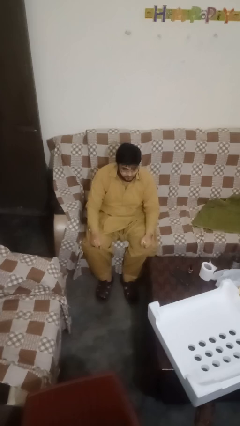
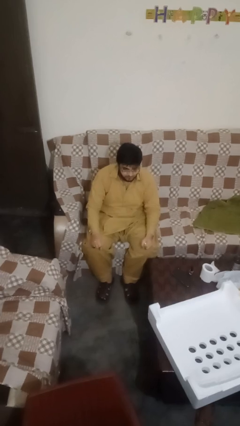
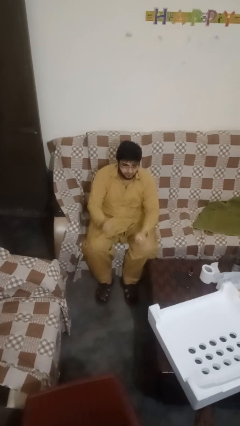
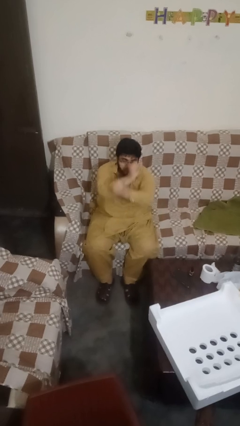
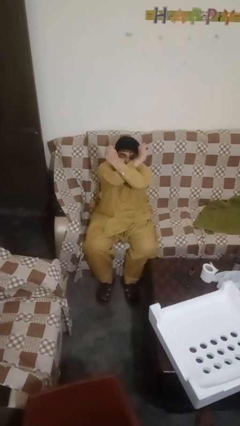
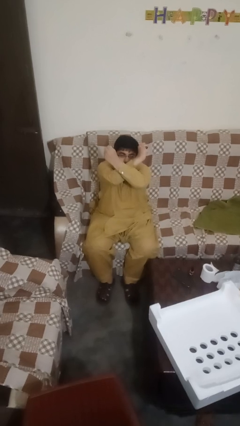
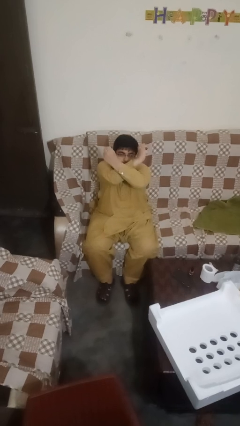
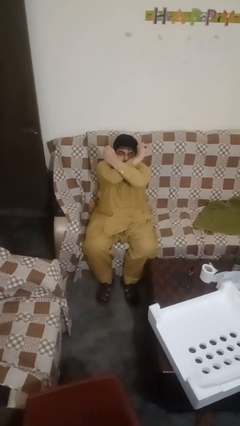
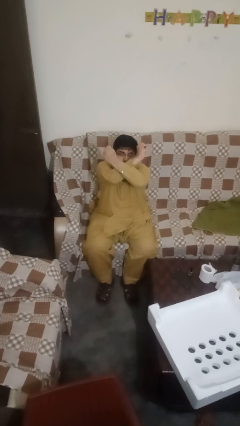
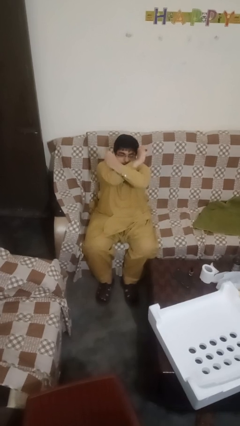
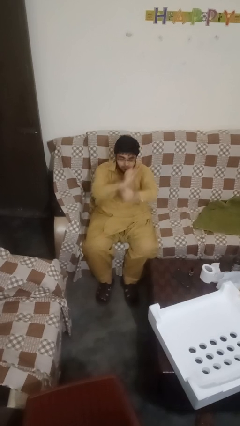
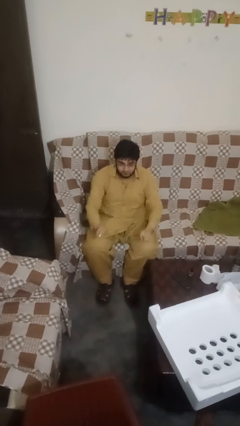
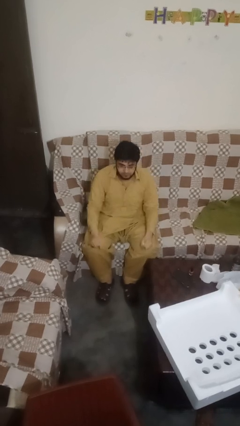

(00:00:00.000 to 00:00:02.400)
person gestures arms x

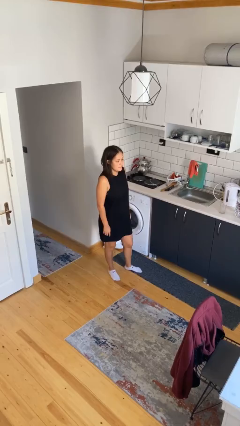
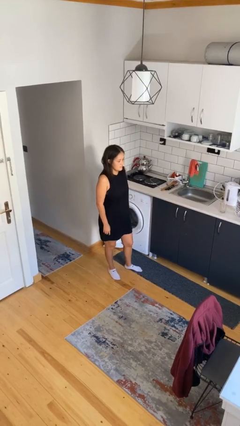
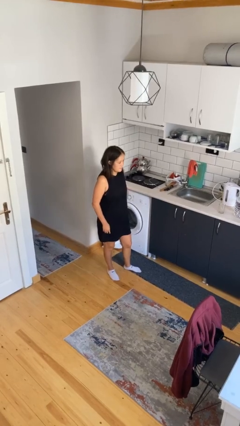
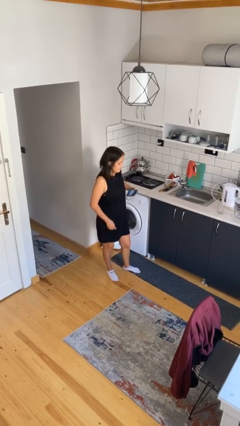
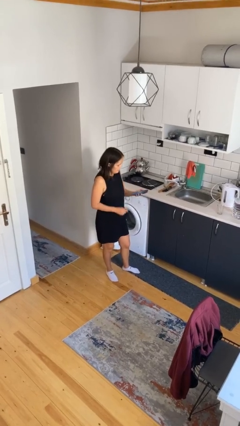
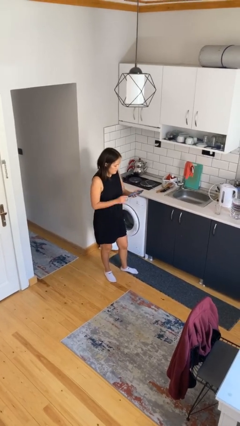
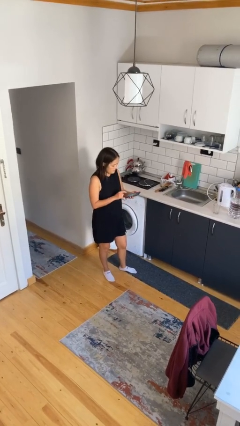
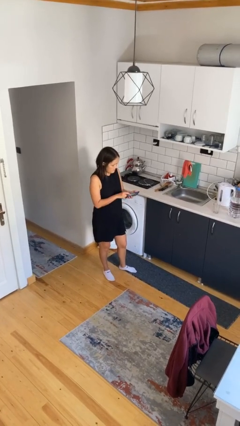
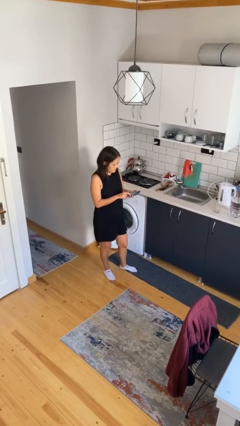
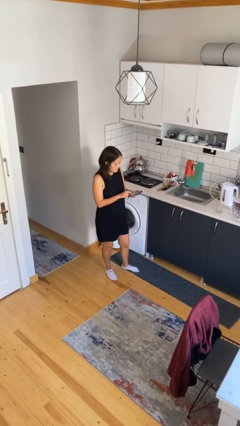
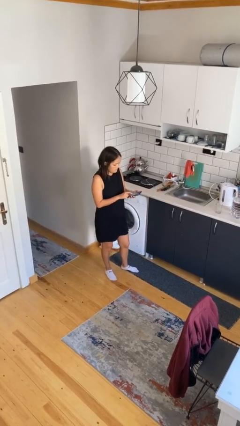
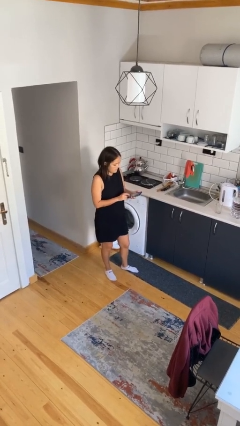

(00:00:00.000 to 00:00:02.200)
person takes phone from pocket

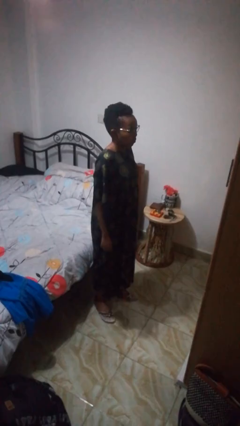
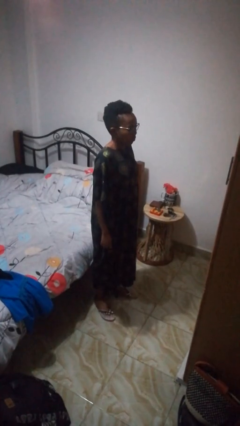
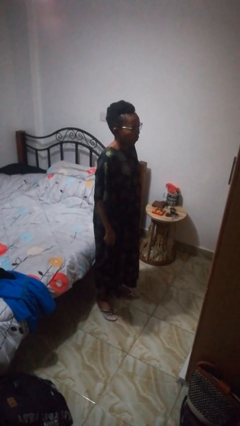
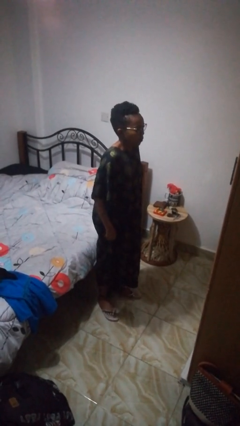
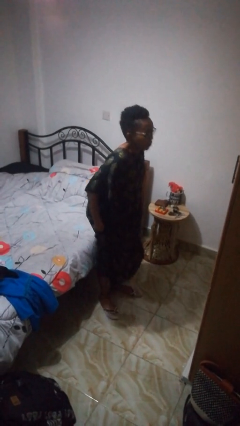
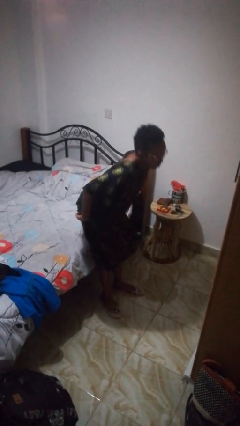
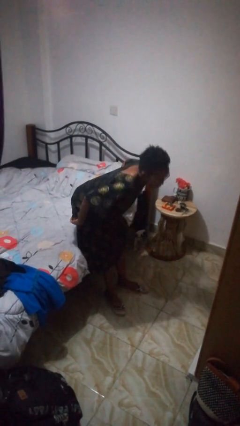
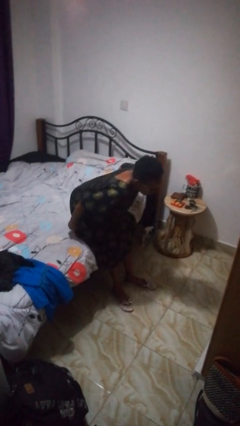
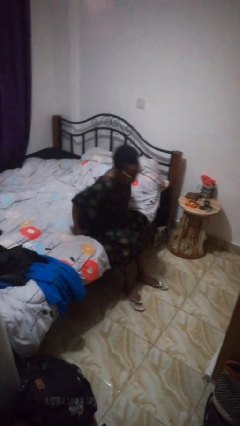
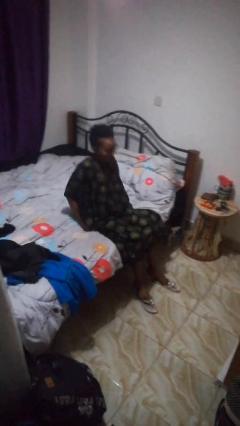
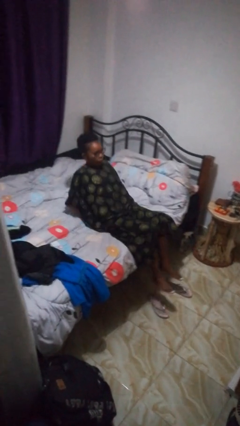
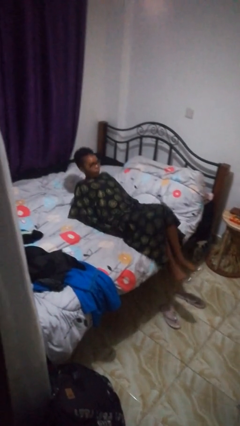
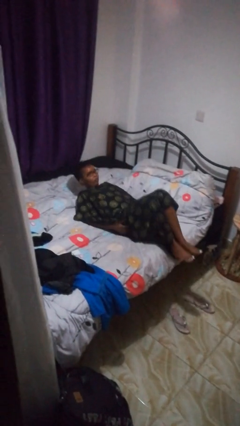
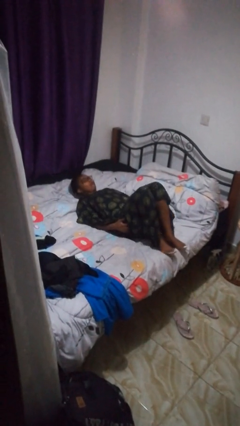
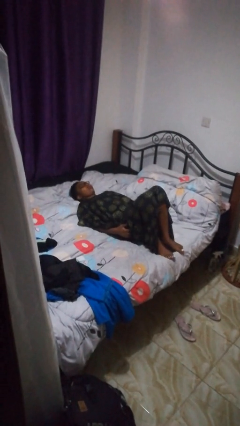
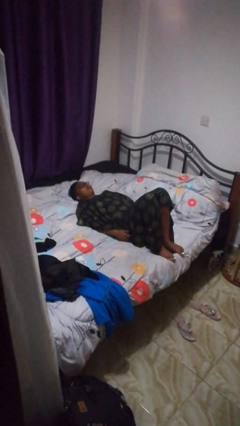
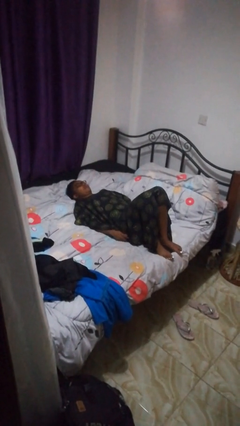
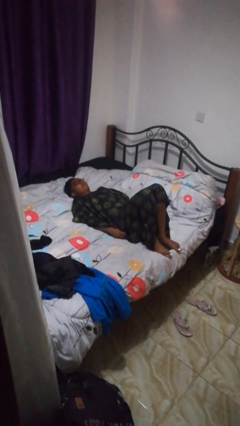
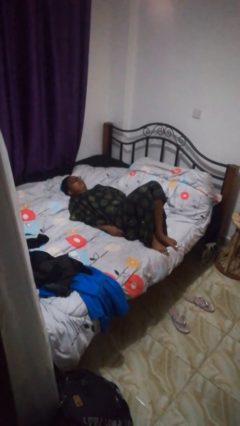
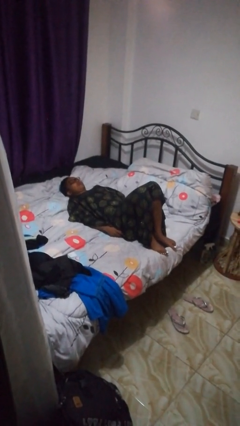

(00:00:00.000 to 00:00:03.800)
person lies down on bed

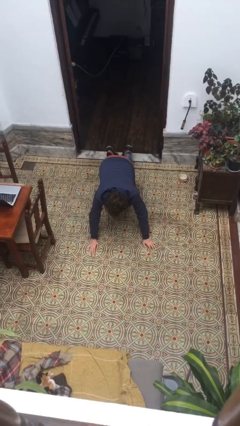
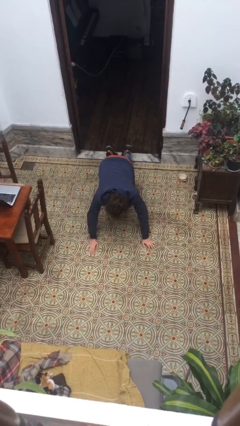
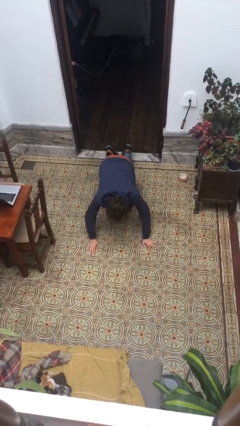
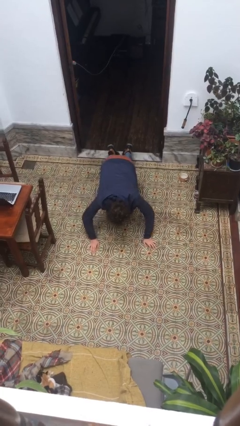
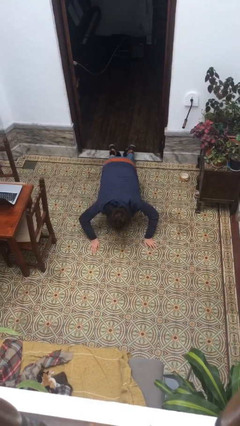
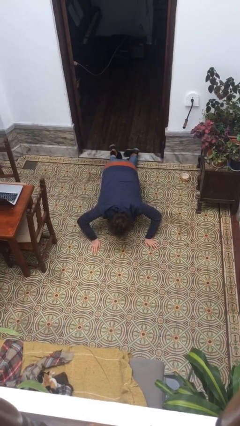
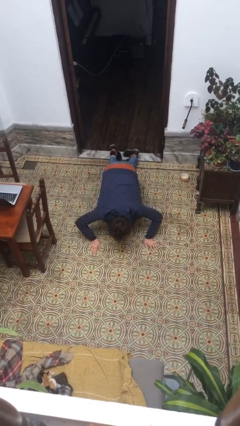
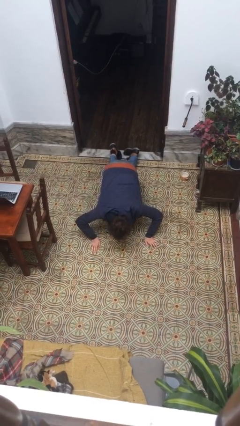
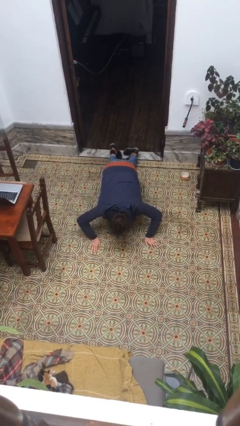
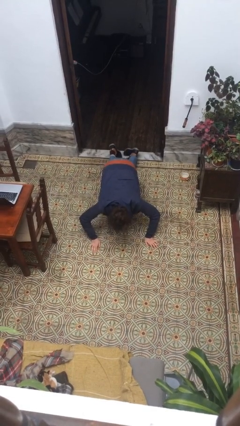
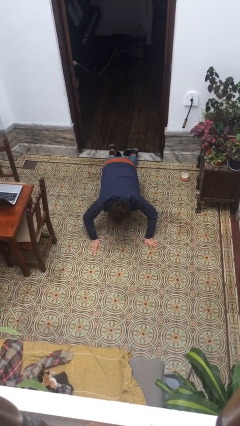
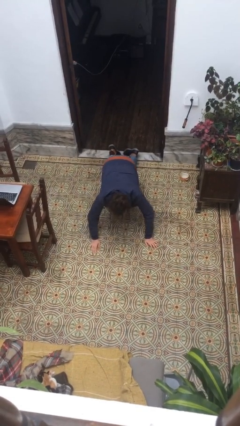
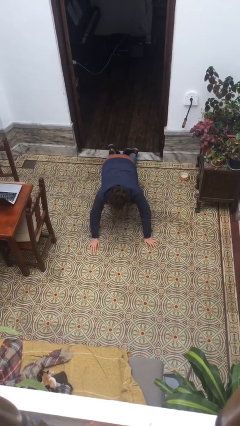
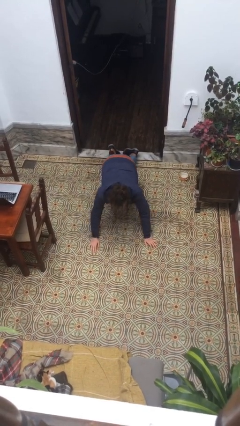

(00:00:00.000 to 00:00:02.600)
person exercises with pushup

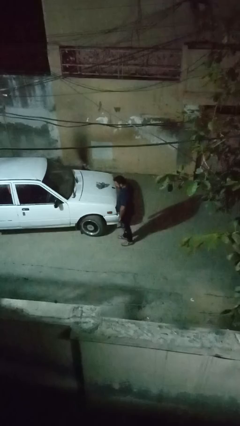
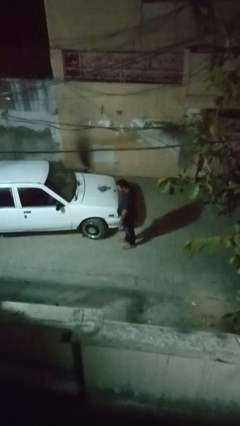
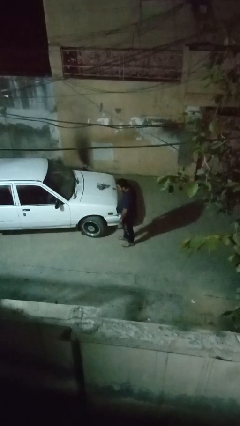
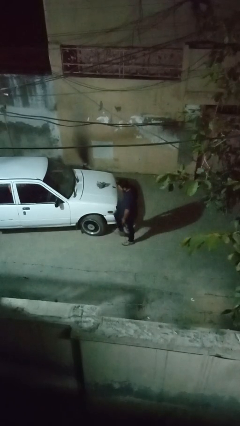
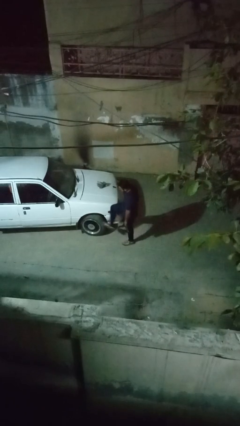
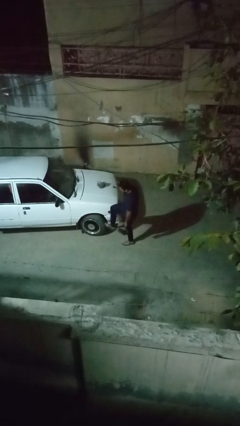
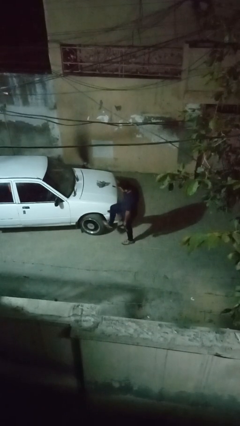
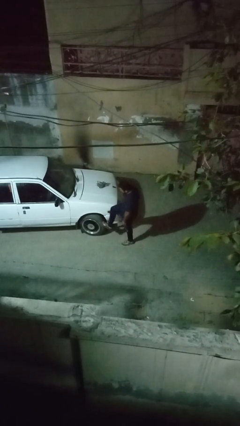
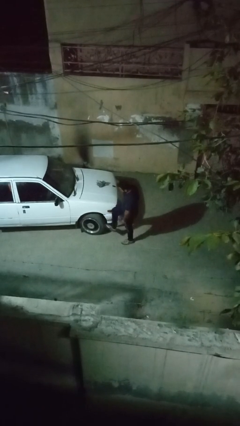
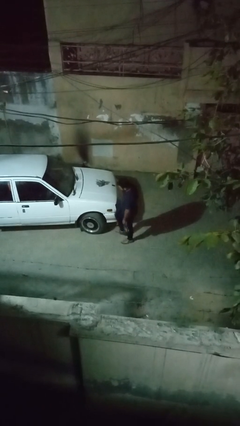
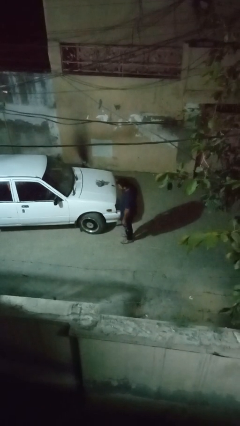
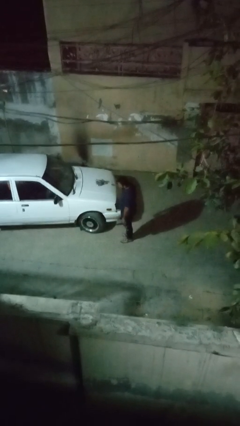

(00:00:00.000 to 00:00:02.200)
person kicks car tires

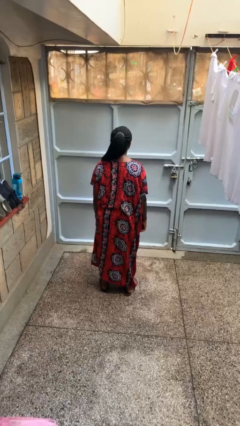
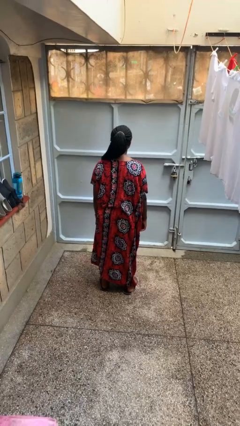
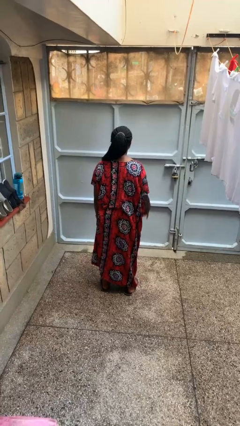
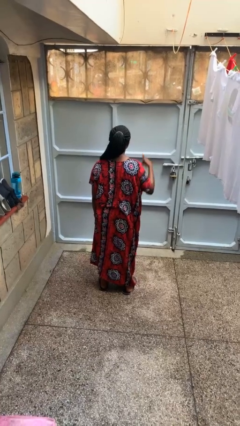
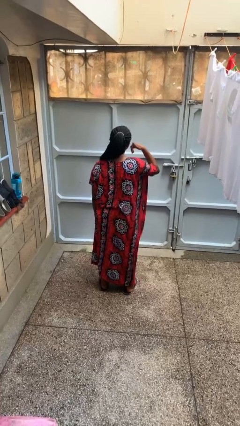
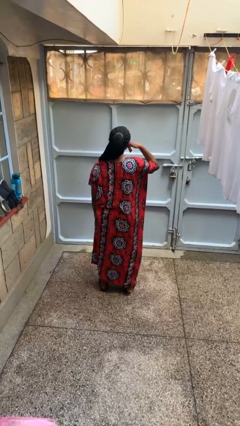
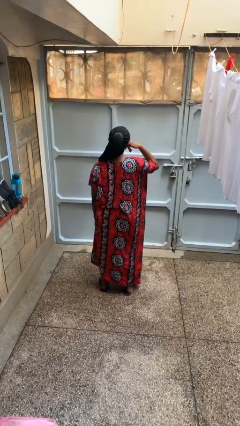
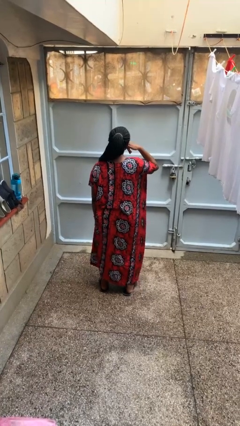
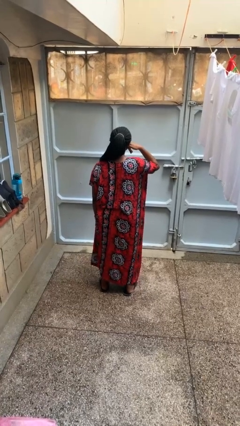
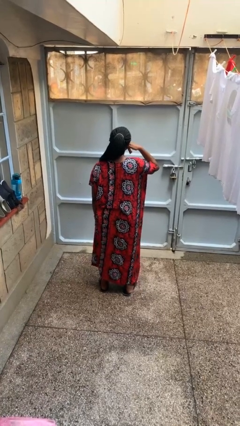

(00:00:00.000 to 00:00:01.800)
person gestures call me

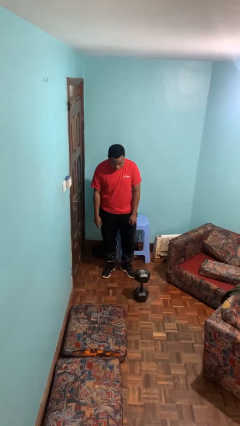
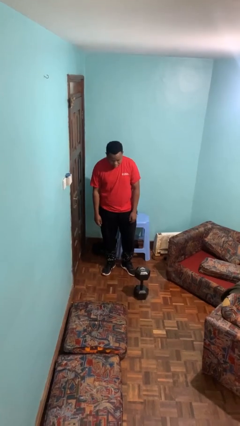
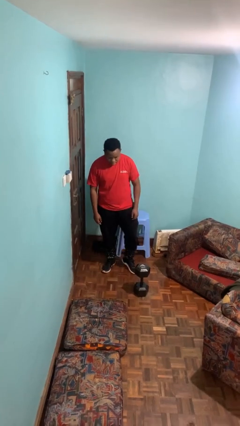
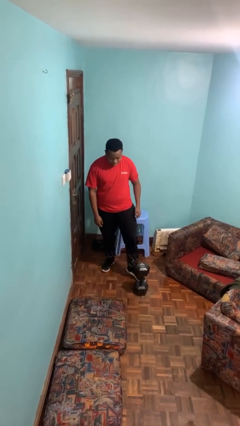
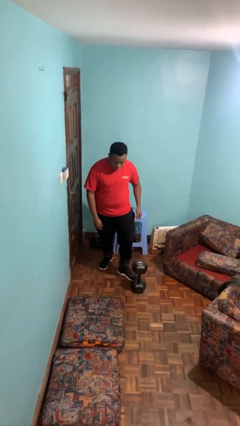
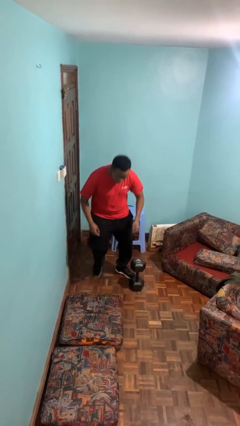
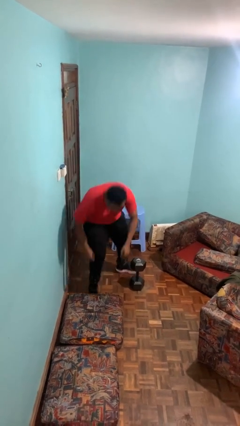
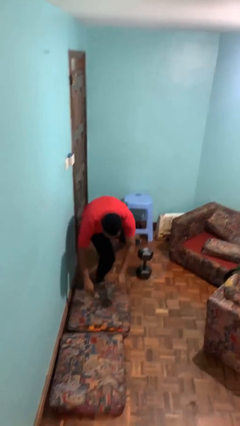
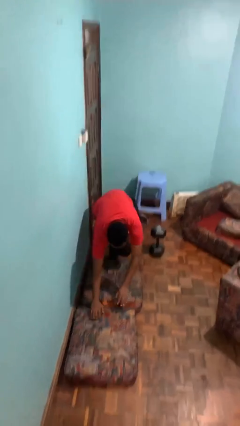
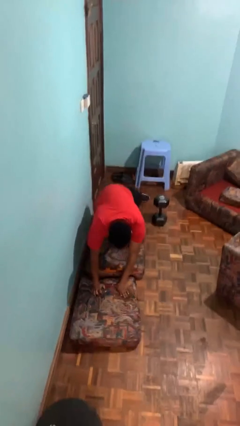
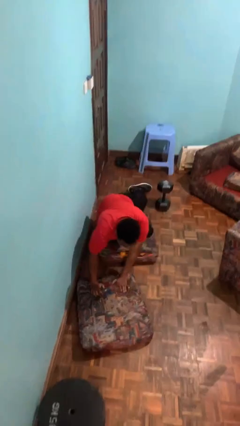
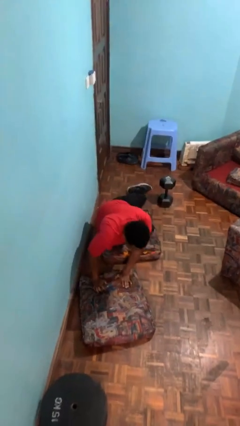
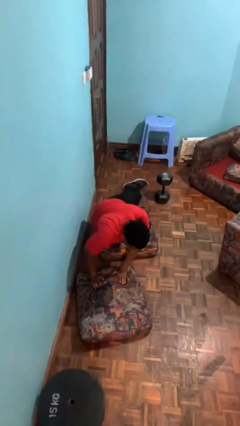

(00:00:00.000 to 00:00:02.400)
person trips on object on floor
